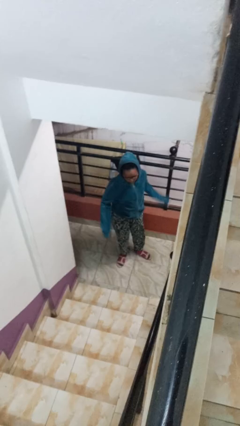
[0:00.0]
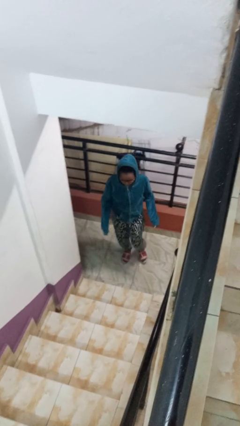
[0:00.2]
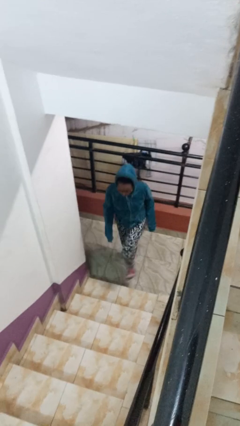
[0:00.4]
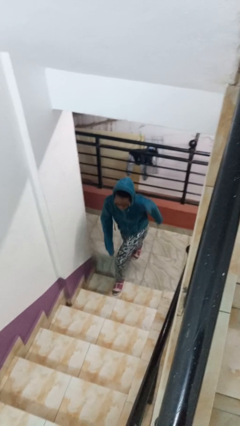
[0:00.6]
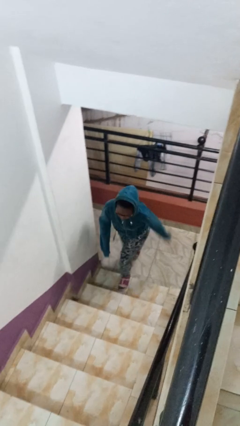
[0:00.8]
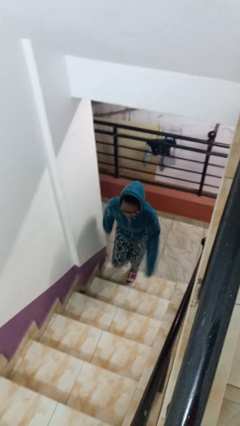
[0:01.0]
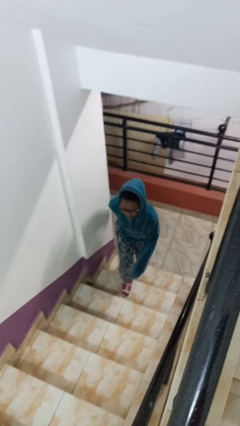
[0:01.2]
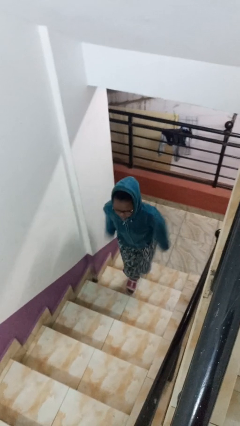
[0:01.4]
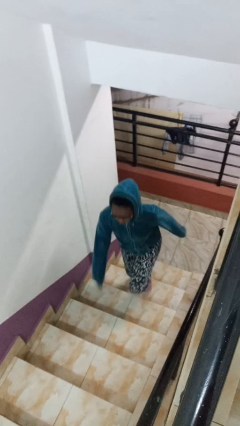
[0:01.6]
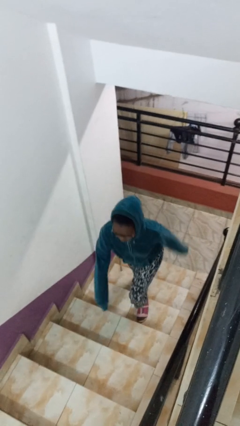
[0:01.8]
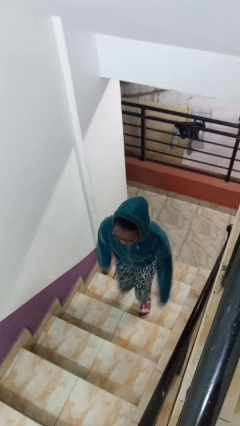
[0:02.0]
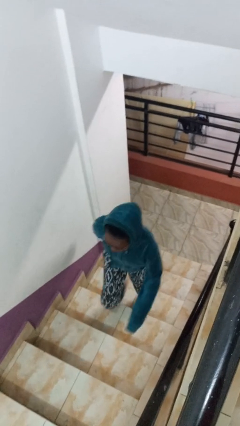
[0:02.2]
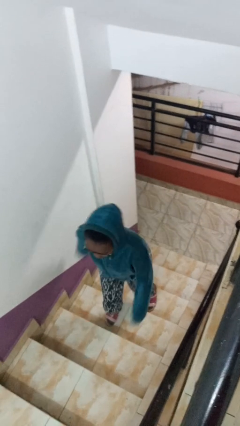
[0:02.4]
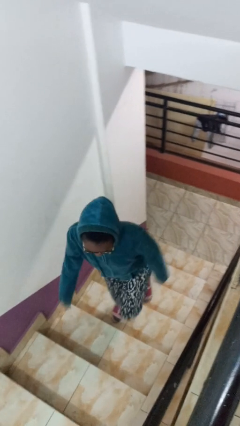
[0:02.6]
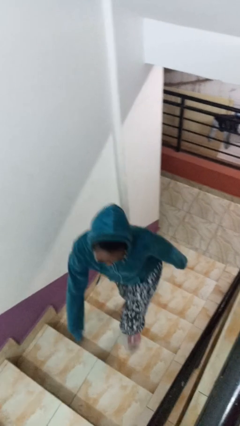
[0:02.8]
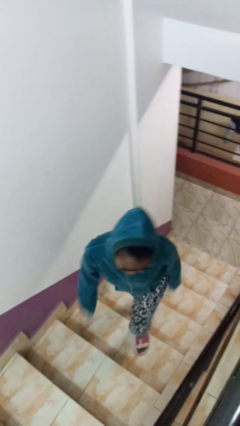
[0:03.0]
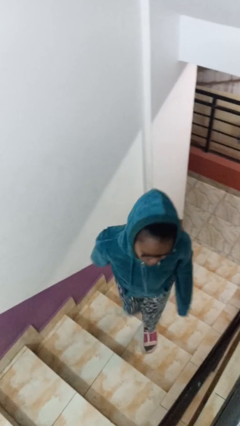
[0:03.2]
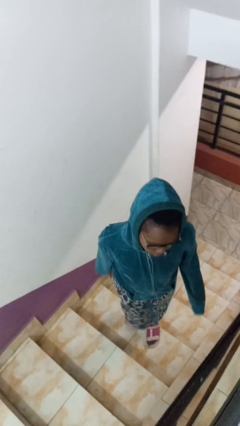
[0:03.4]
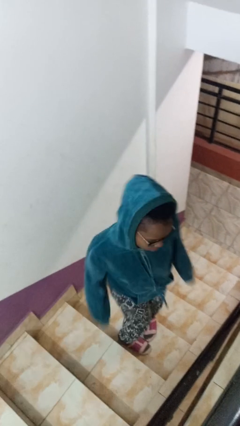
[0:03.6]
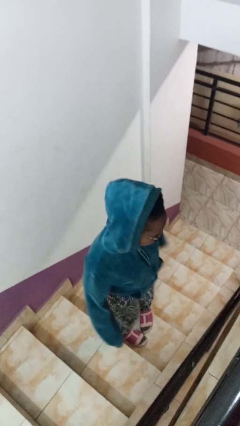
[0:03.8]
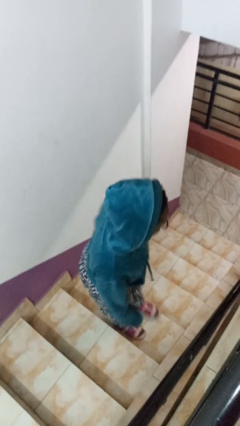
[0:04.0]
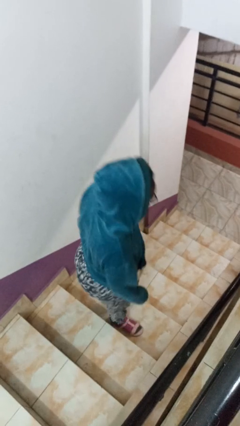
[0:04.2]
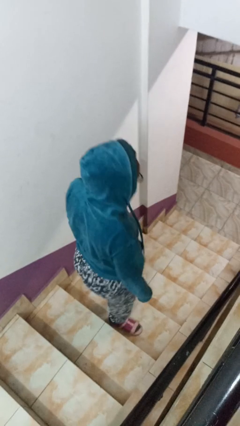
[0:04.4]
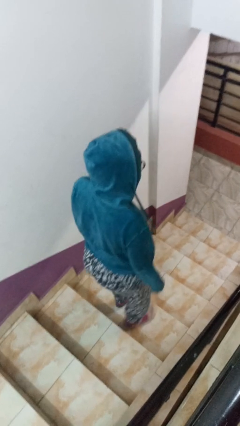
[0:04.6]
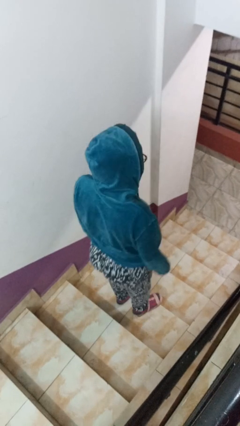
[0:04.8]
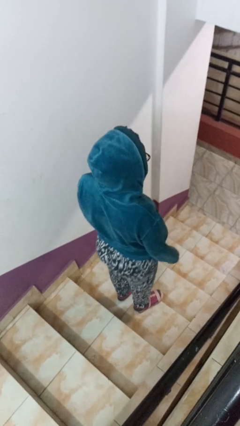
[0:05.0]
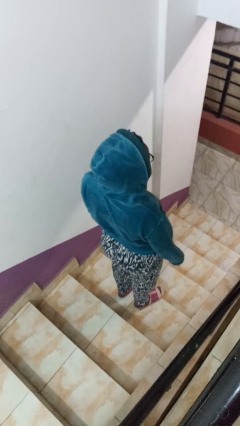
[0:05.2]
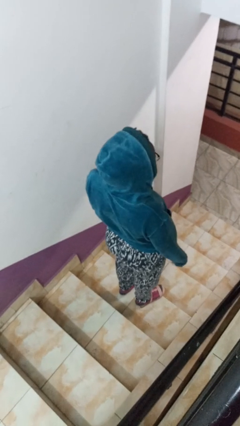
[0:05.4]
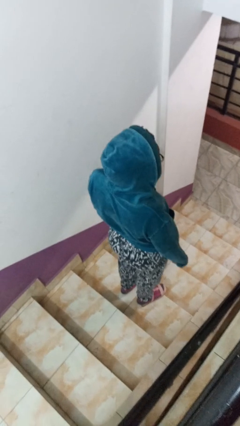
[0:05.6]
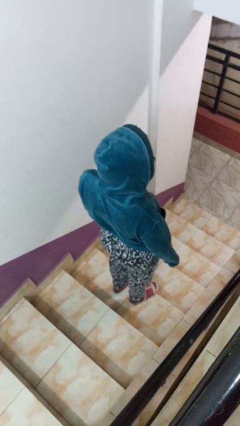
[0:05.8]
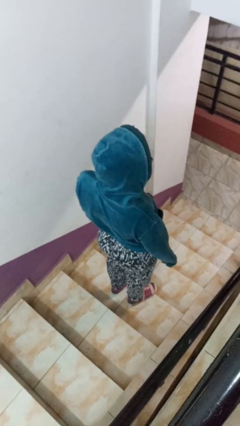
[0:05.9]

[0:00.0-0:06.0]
person climbs up stairs

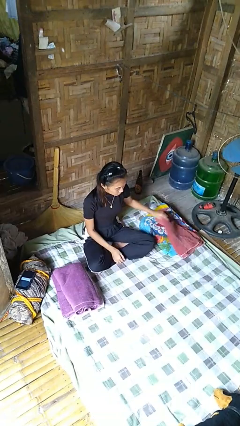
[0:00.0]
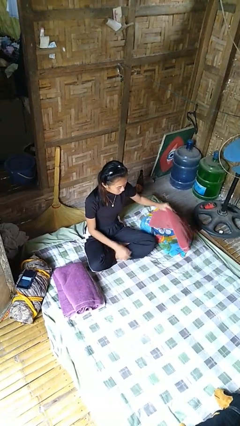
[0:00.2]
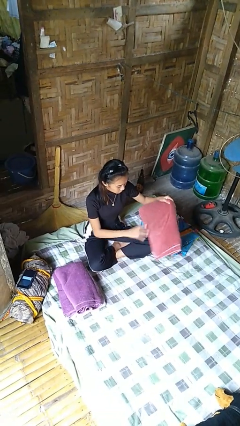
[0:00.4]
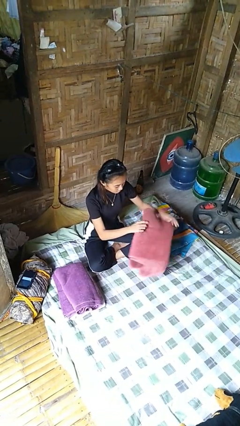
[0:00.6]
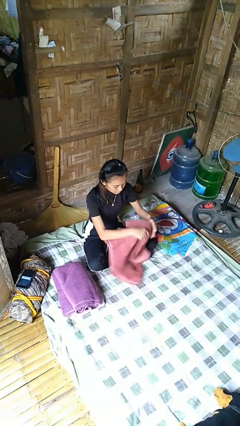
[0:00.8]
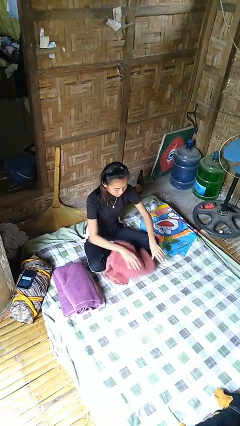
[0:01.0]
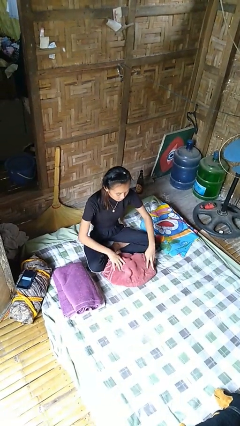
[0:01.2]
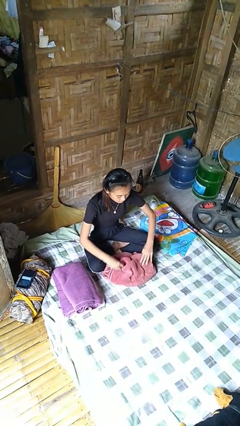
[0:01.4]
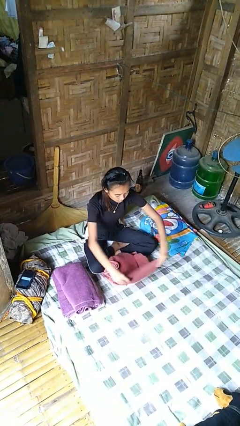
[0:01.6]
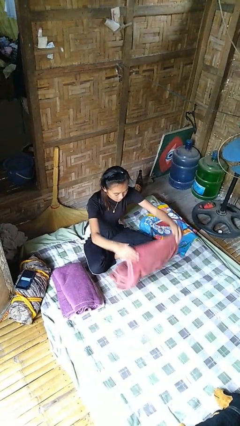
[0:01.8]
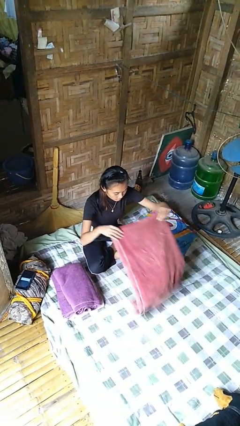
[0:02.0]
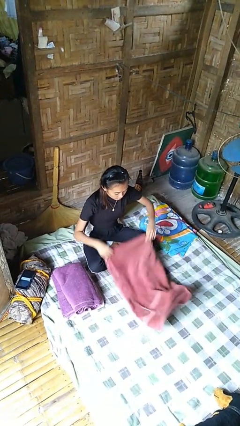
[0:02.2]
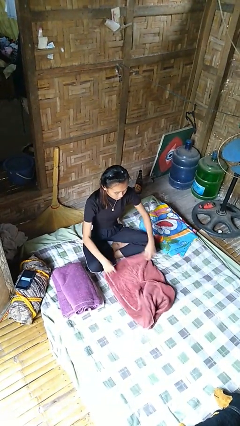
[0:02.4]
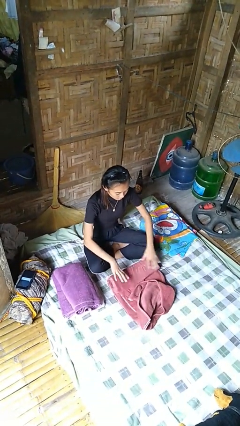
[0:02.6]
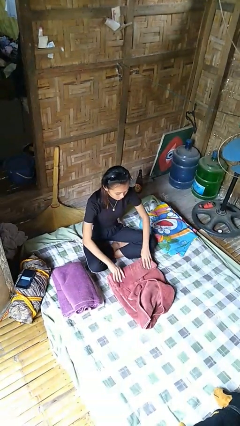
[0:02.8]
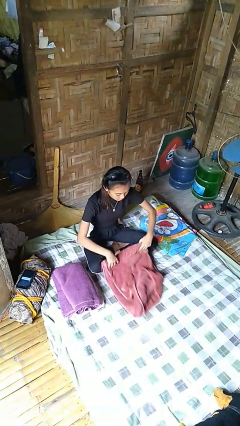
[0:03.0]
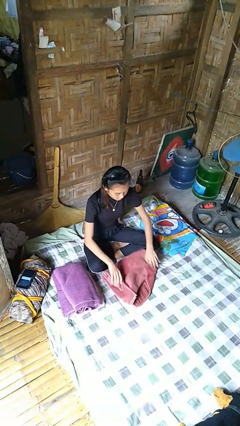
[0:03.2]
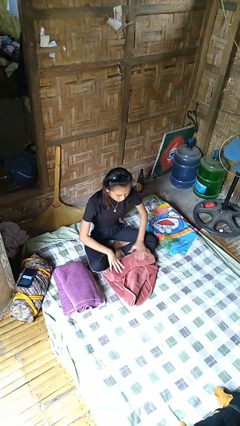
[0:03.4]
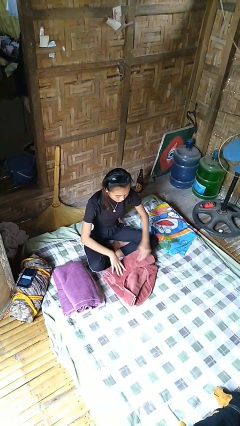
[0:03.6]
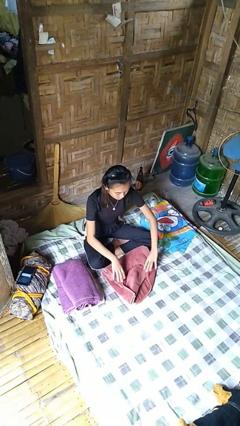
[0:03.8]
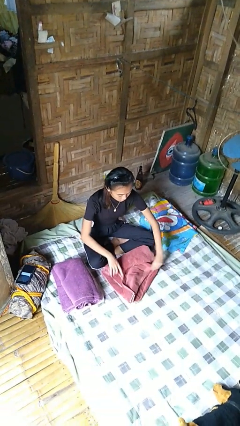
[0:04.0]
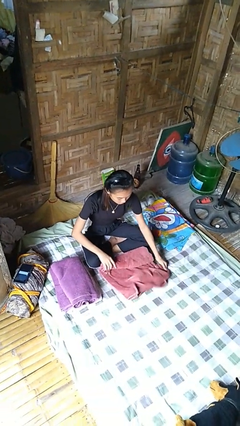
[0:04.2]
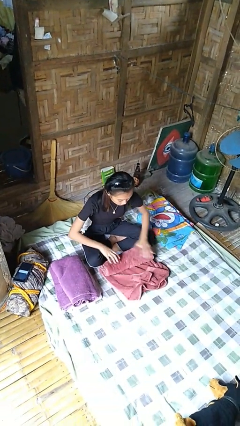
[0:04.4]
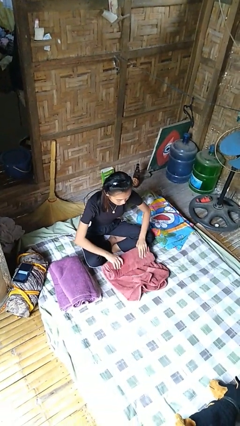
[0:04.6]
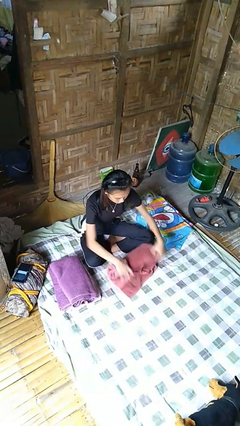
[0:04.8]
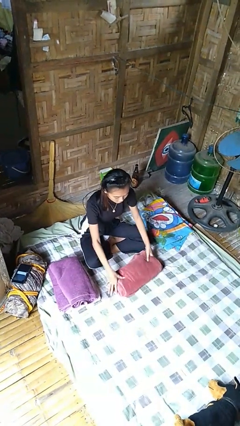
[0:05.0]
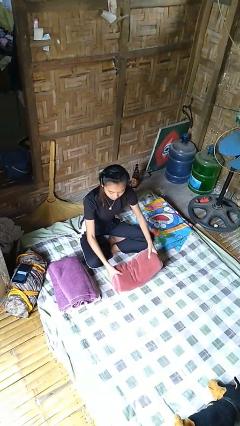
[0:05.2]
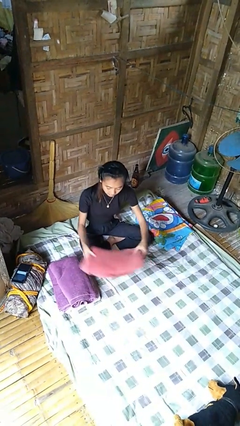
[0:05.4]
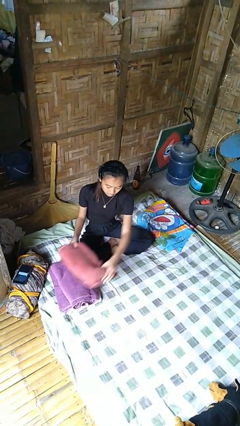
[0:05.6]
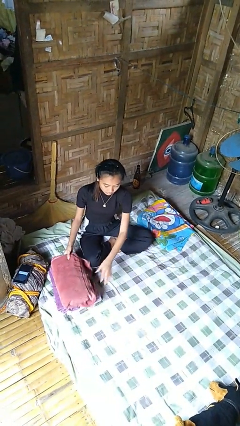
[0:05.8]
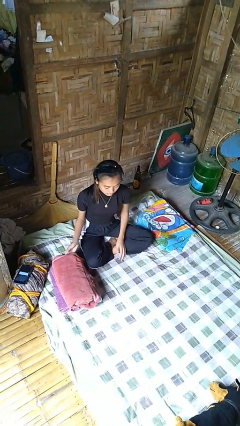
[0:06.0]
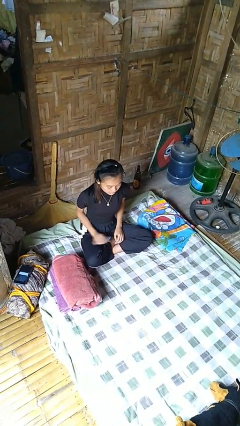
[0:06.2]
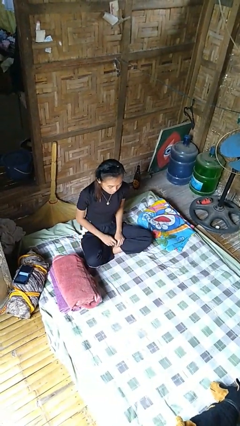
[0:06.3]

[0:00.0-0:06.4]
person folds towel

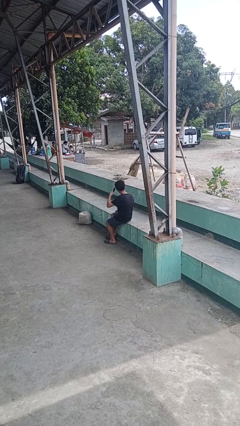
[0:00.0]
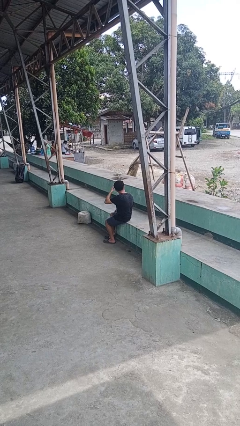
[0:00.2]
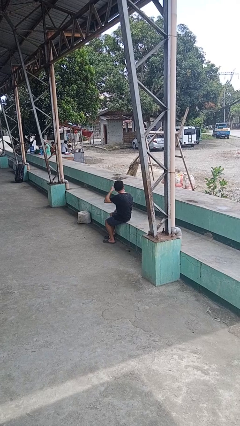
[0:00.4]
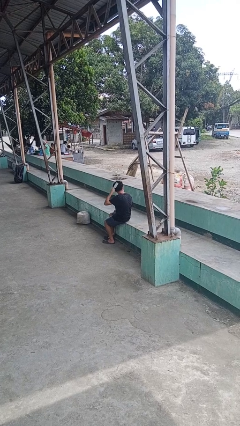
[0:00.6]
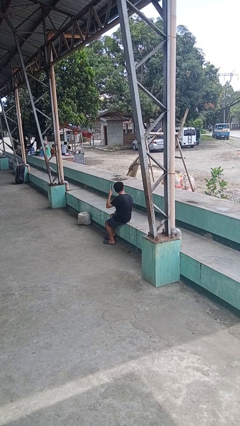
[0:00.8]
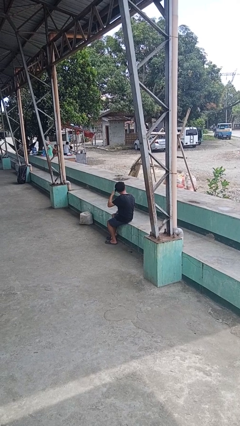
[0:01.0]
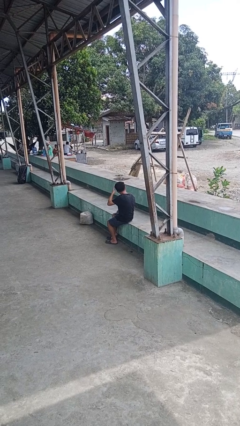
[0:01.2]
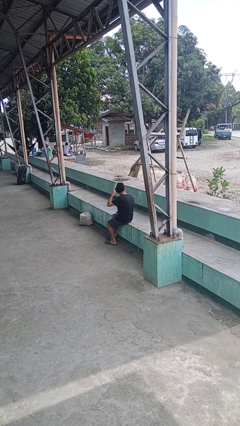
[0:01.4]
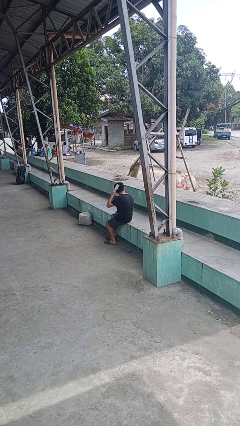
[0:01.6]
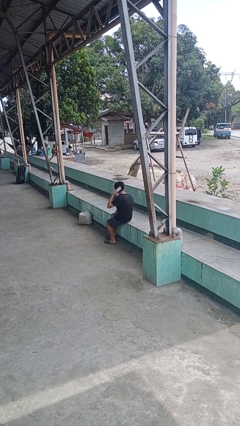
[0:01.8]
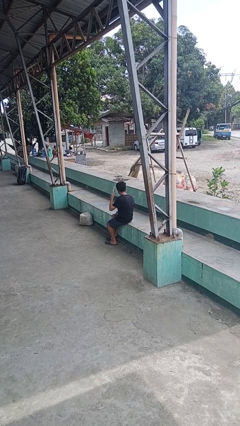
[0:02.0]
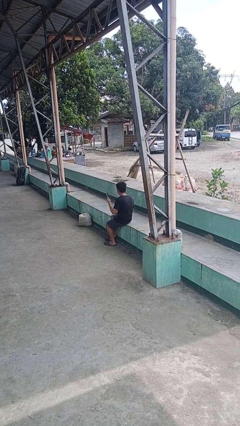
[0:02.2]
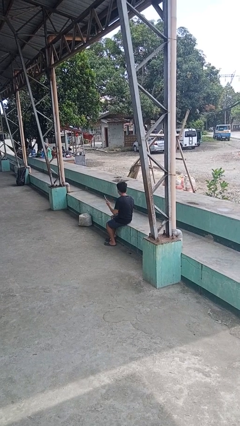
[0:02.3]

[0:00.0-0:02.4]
person brushes hair

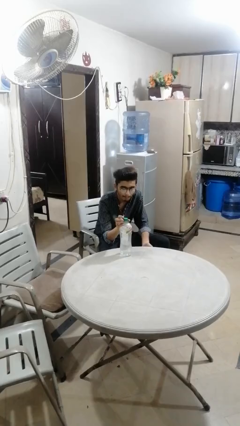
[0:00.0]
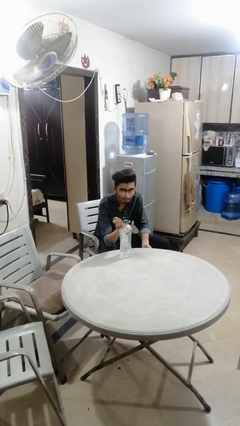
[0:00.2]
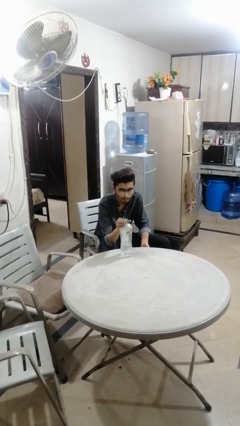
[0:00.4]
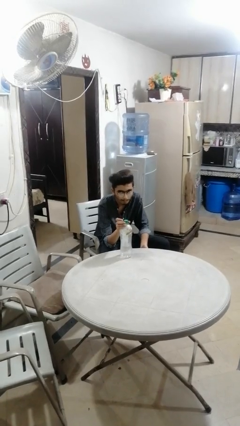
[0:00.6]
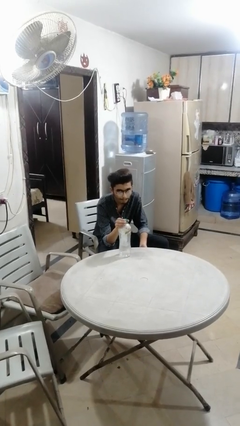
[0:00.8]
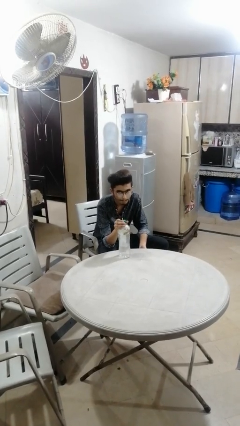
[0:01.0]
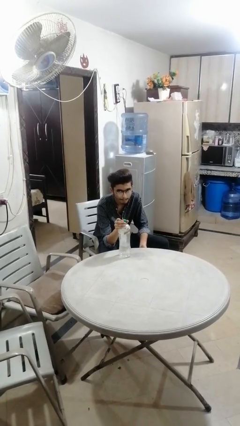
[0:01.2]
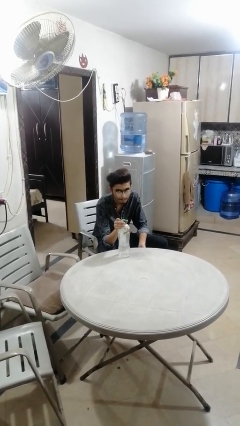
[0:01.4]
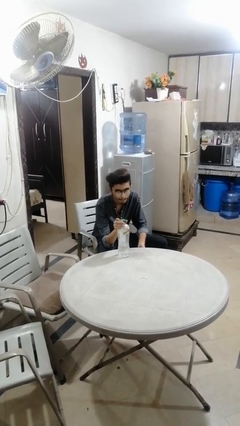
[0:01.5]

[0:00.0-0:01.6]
person screws lid to bottle

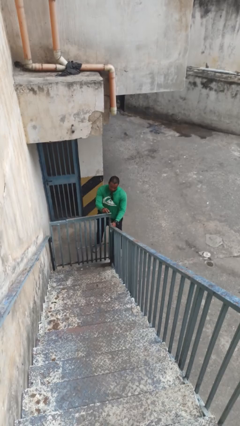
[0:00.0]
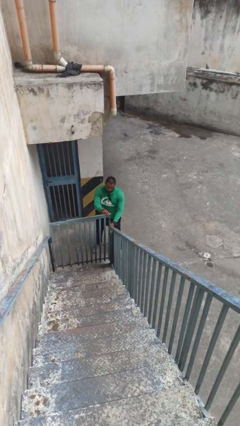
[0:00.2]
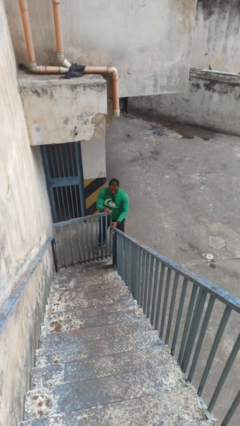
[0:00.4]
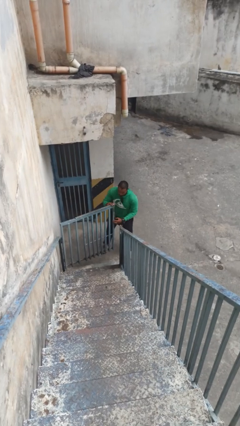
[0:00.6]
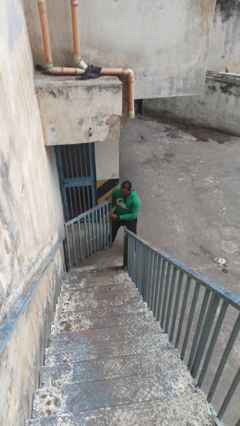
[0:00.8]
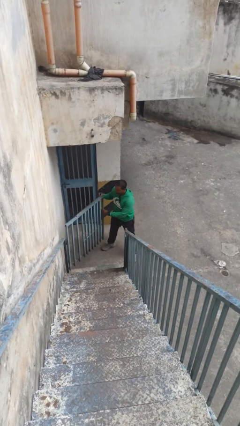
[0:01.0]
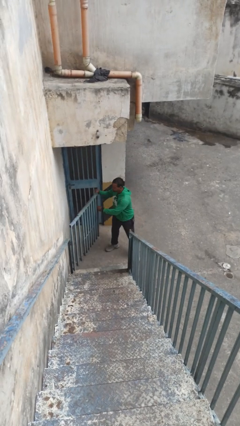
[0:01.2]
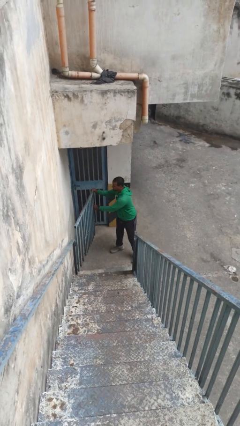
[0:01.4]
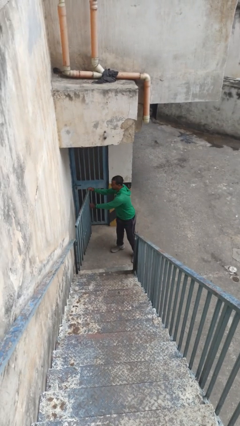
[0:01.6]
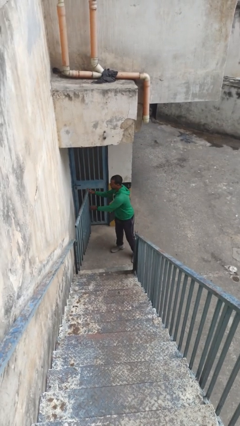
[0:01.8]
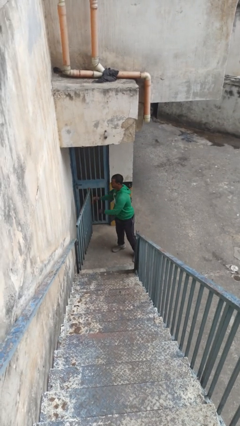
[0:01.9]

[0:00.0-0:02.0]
person opens facility door
